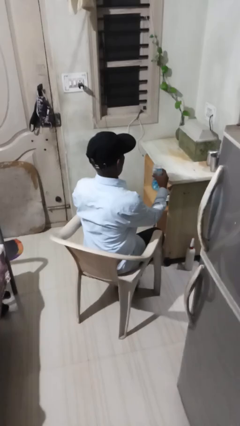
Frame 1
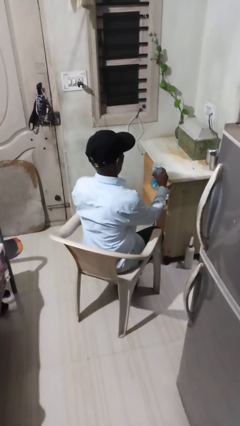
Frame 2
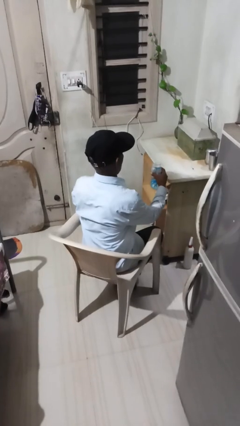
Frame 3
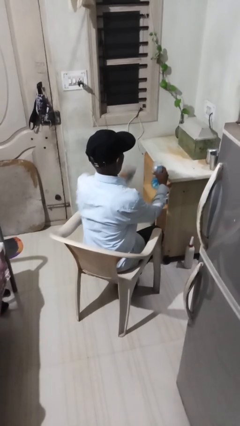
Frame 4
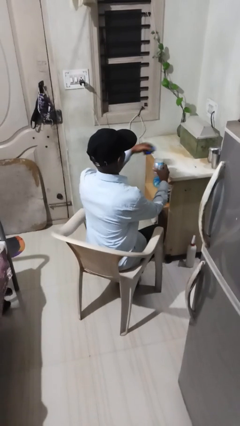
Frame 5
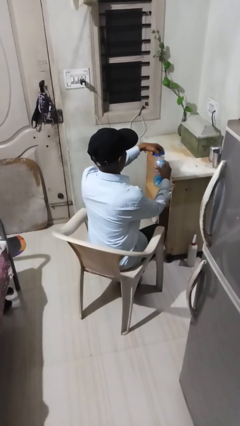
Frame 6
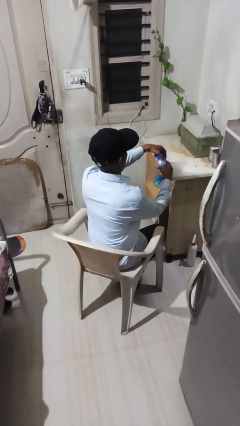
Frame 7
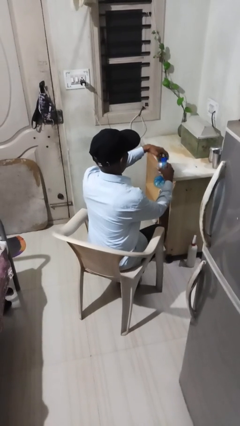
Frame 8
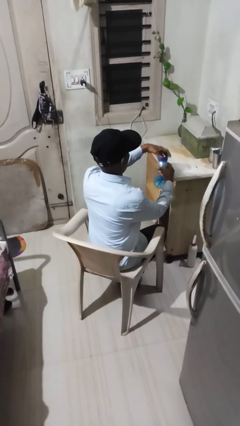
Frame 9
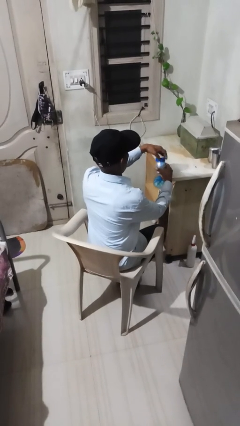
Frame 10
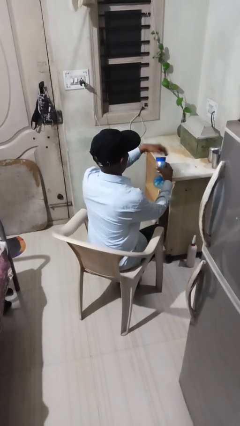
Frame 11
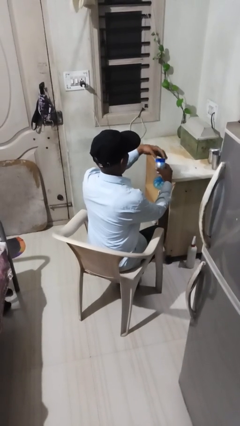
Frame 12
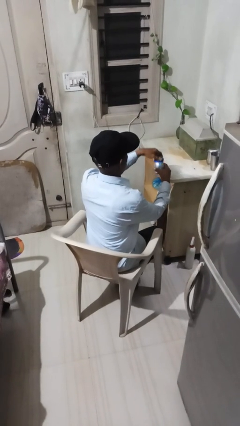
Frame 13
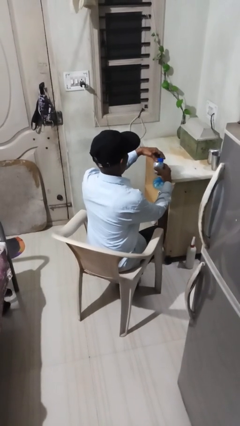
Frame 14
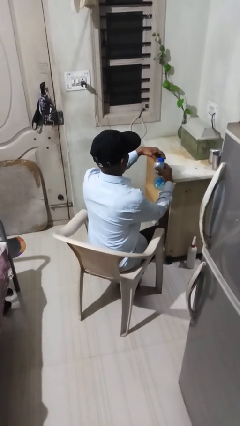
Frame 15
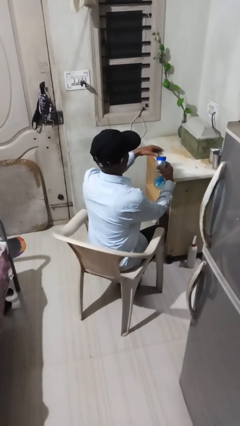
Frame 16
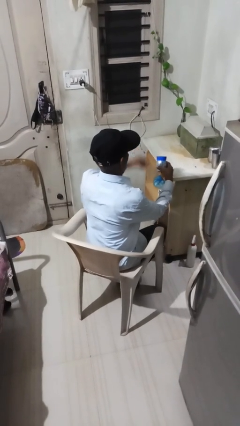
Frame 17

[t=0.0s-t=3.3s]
person closes jar

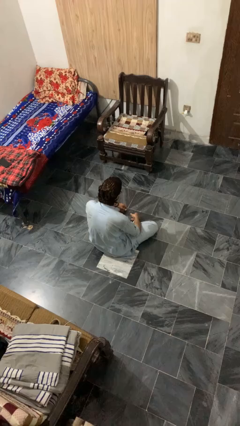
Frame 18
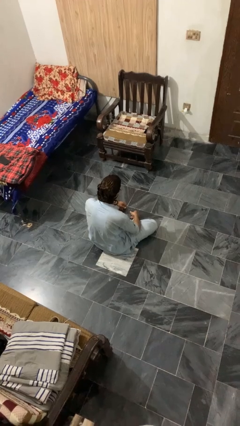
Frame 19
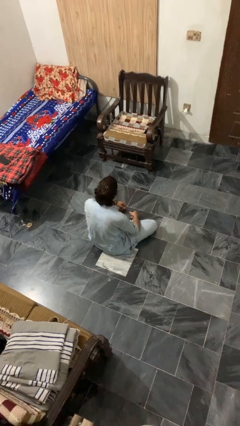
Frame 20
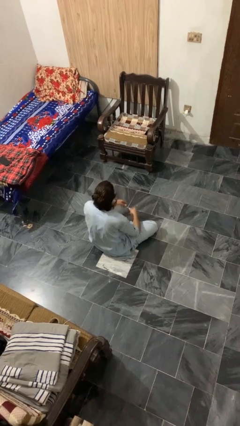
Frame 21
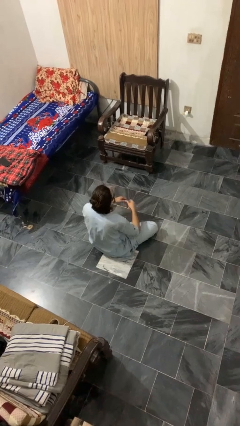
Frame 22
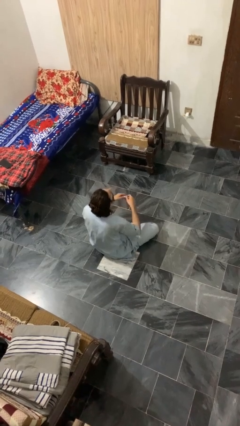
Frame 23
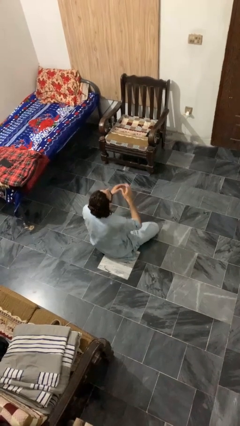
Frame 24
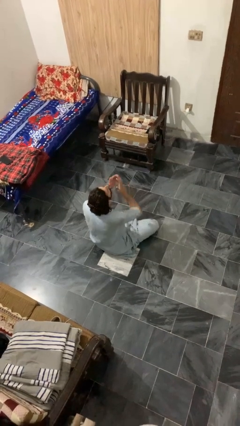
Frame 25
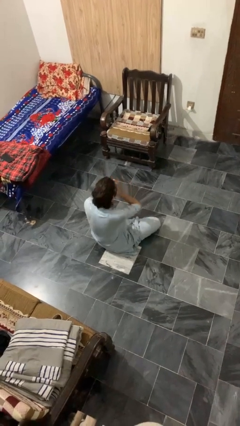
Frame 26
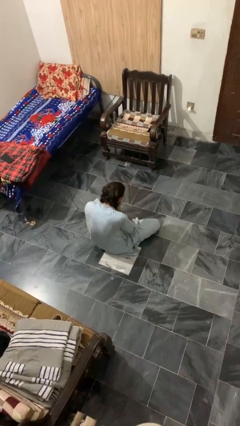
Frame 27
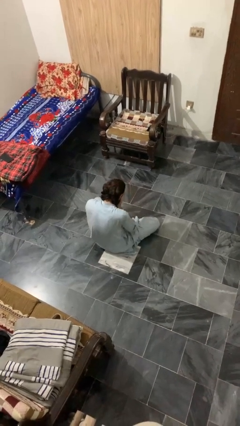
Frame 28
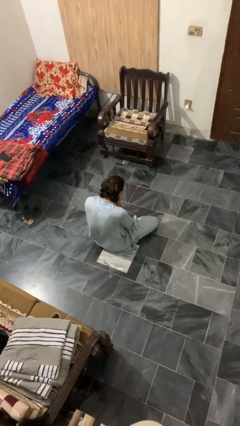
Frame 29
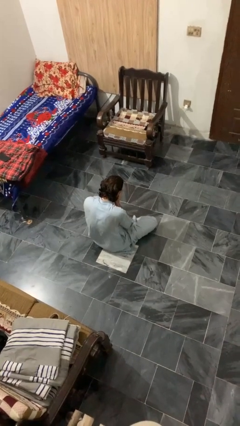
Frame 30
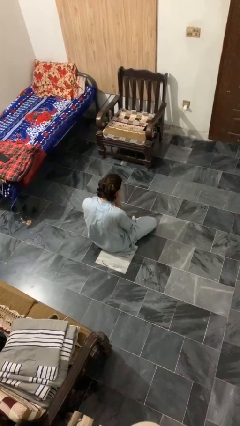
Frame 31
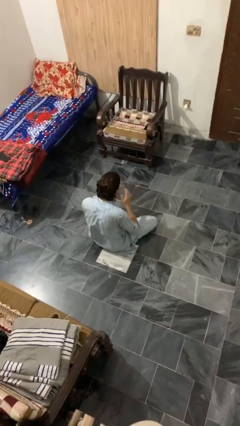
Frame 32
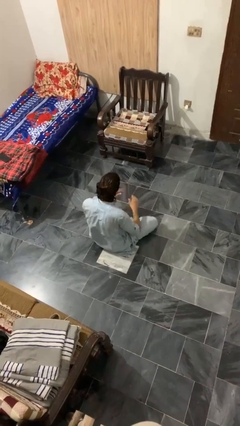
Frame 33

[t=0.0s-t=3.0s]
person sneezes into hand

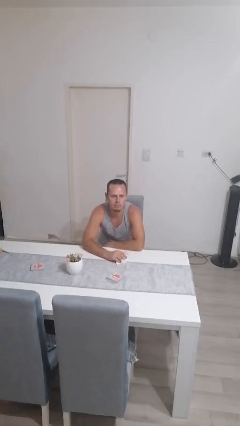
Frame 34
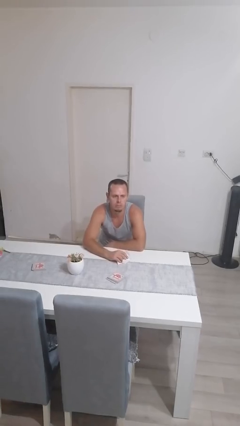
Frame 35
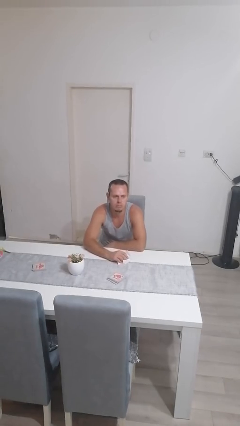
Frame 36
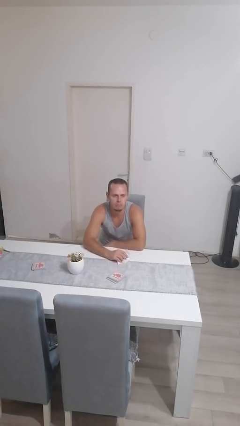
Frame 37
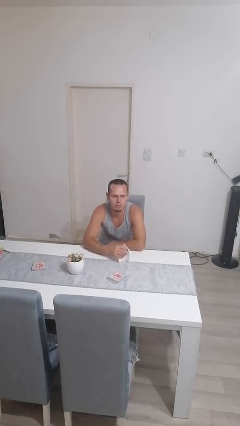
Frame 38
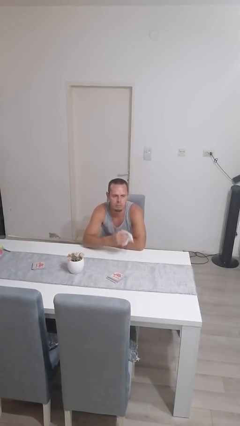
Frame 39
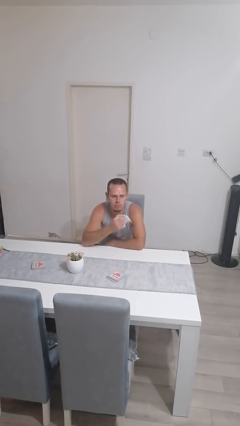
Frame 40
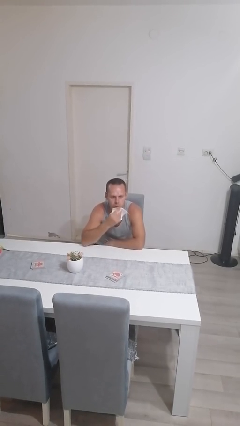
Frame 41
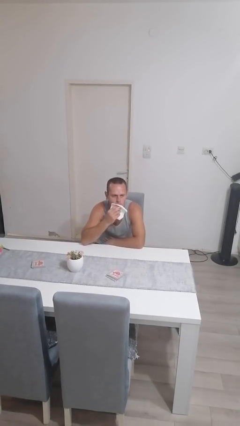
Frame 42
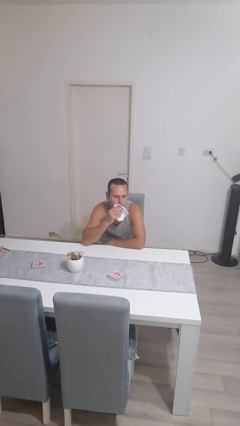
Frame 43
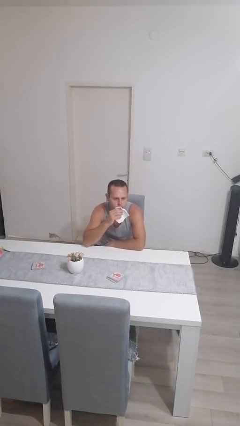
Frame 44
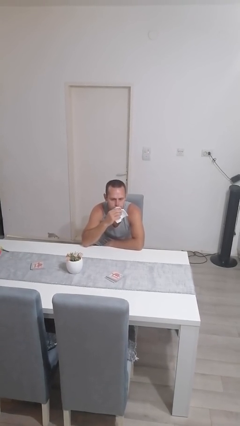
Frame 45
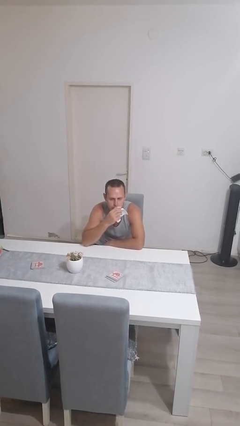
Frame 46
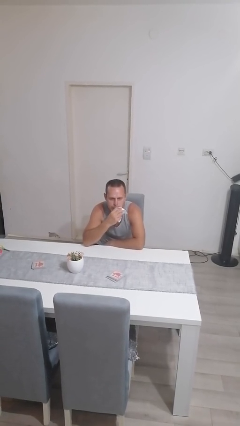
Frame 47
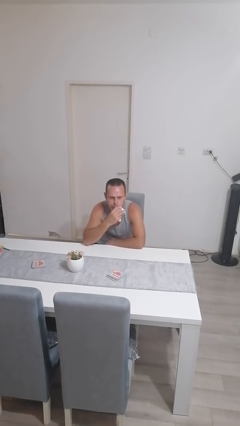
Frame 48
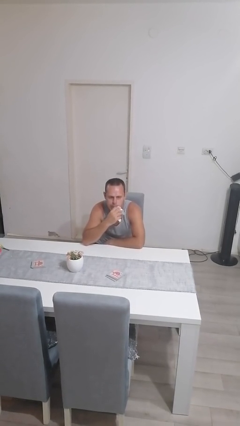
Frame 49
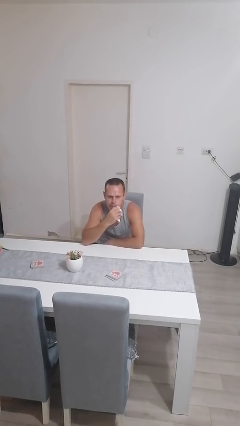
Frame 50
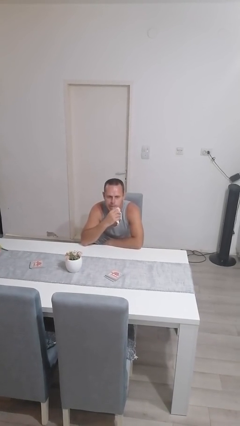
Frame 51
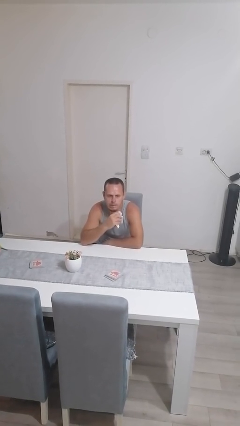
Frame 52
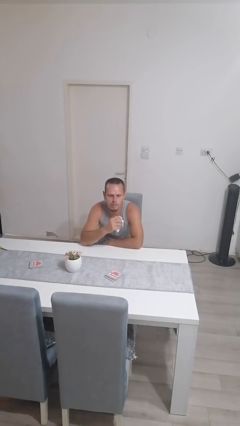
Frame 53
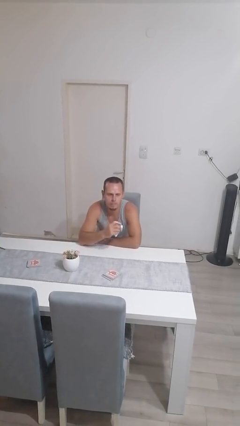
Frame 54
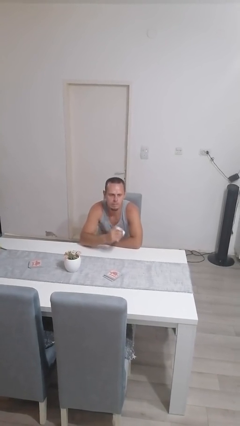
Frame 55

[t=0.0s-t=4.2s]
person wipes mouth with napkin

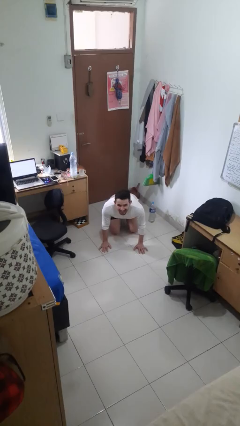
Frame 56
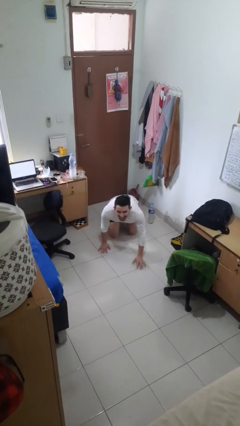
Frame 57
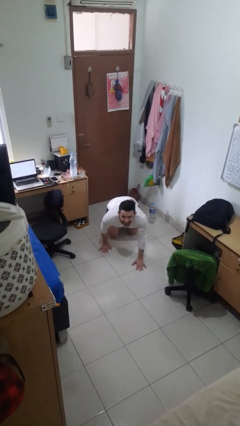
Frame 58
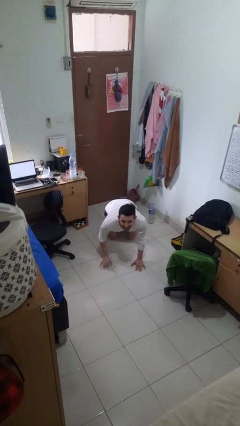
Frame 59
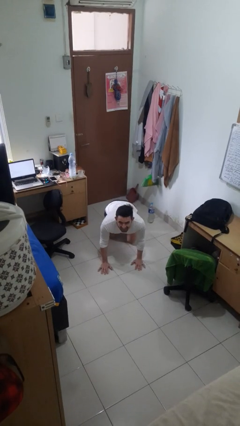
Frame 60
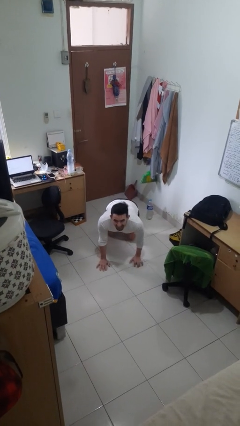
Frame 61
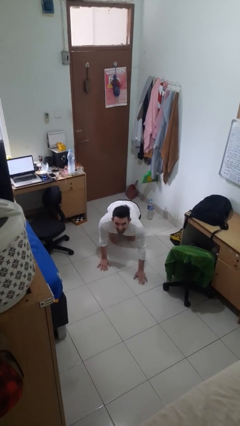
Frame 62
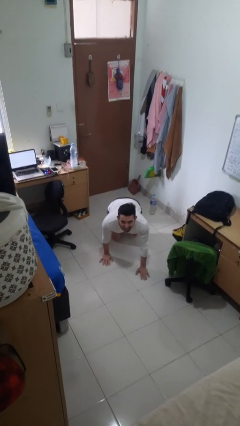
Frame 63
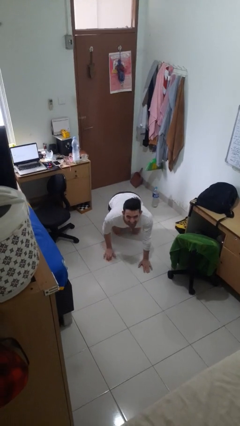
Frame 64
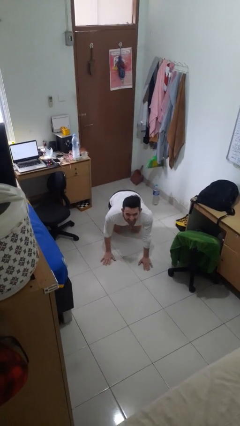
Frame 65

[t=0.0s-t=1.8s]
person crawls

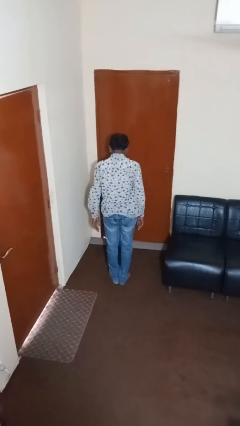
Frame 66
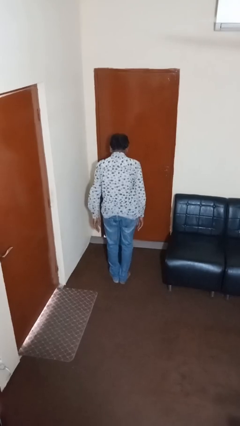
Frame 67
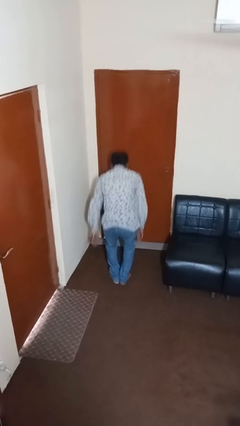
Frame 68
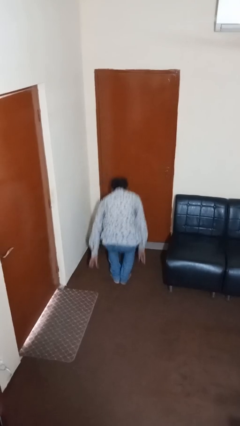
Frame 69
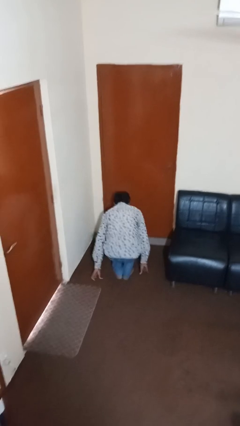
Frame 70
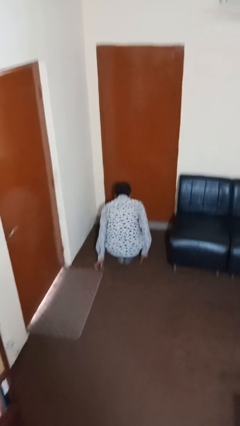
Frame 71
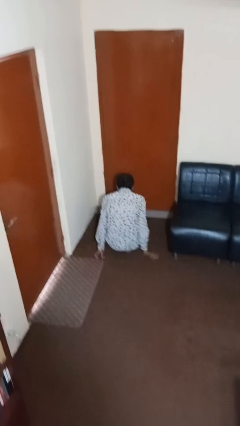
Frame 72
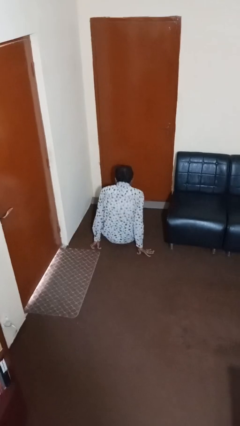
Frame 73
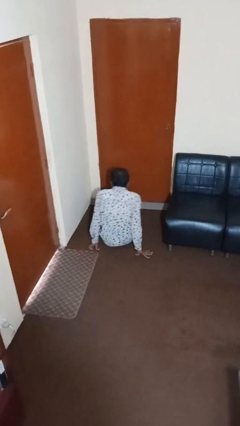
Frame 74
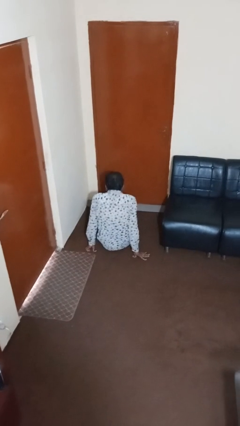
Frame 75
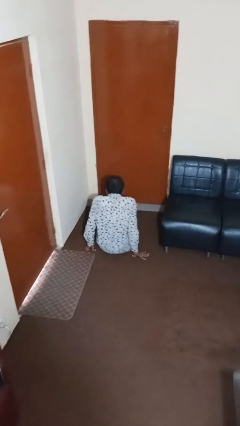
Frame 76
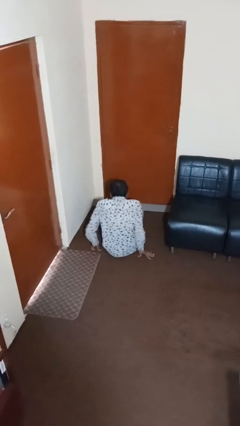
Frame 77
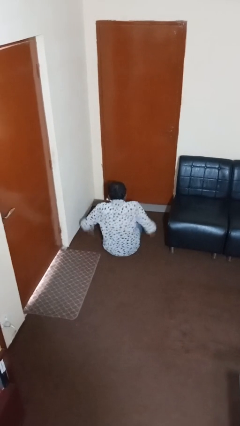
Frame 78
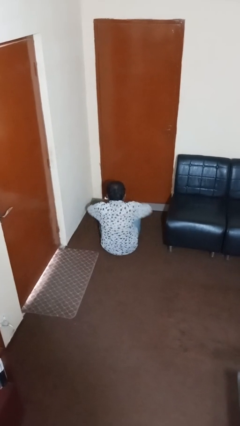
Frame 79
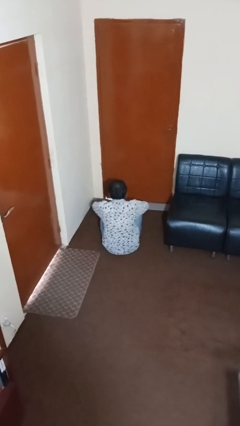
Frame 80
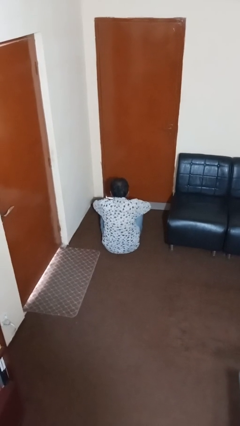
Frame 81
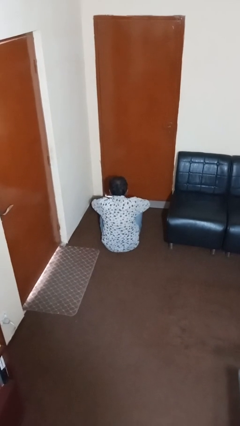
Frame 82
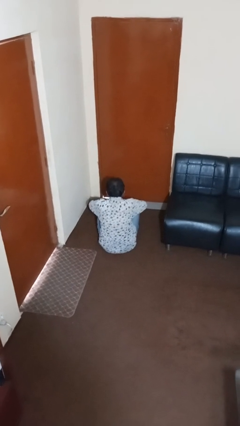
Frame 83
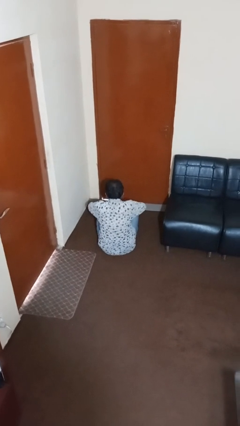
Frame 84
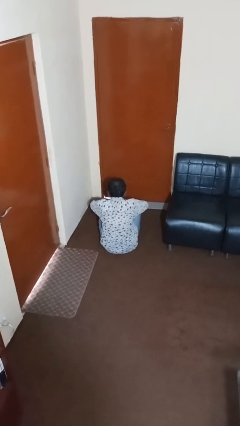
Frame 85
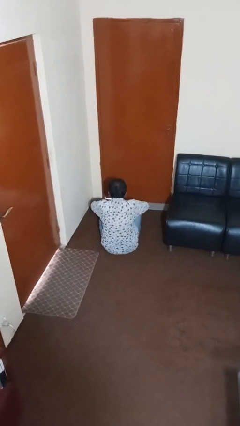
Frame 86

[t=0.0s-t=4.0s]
person sits crisscross

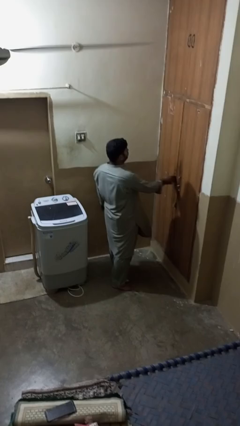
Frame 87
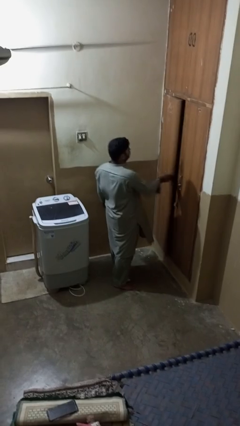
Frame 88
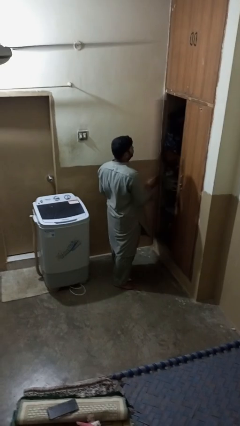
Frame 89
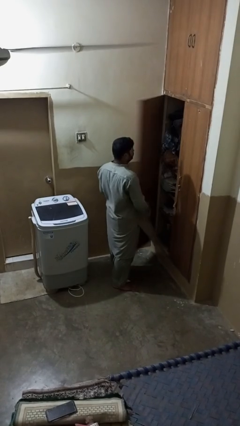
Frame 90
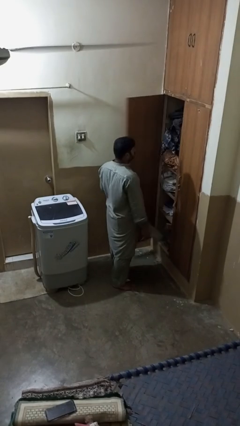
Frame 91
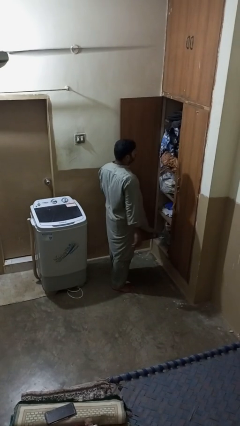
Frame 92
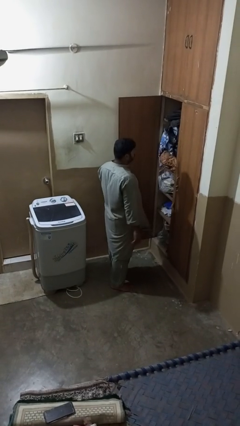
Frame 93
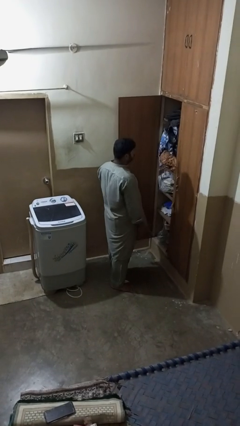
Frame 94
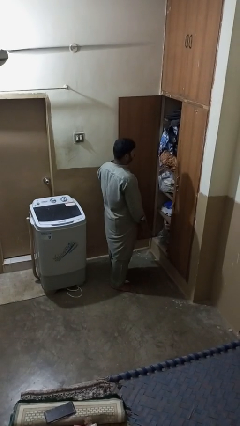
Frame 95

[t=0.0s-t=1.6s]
person opens closet door
